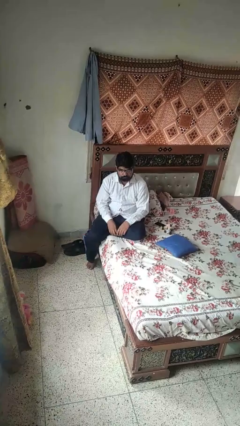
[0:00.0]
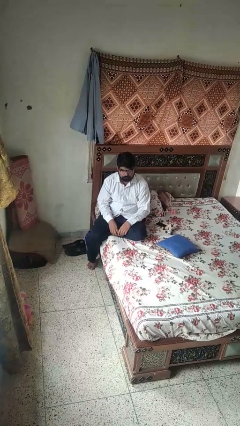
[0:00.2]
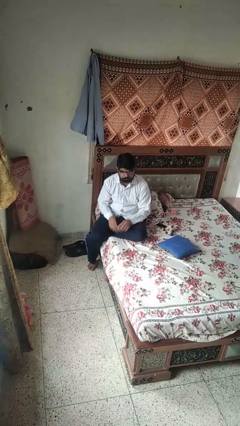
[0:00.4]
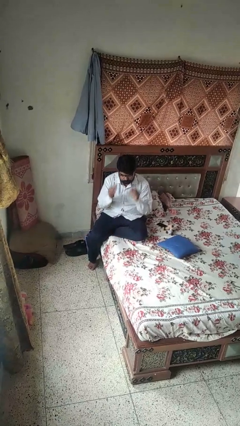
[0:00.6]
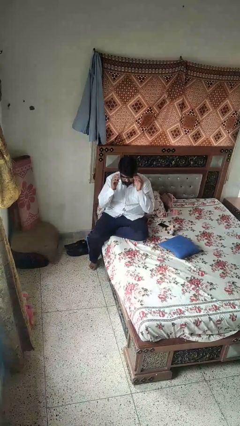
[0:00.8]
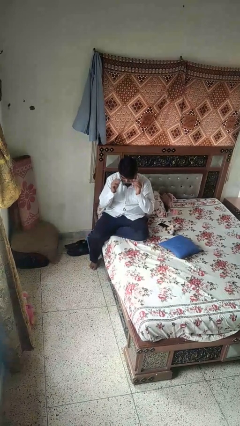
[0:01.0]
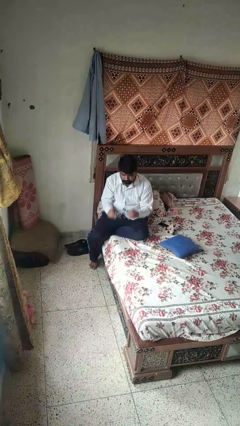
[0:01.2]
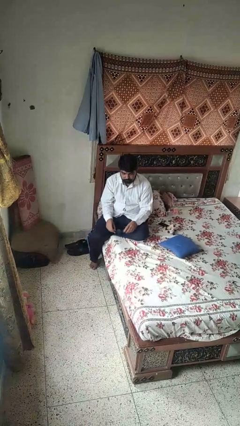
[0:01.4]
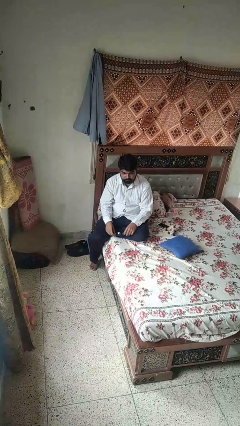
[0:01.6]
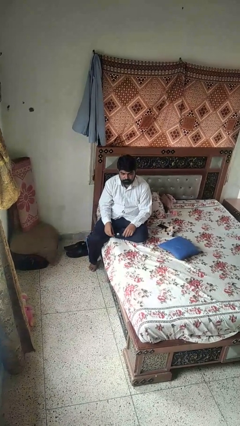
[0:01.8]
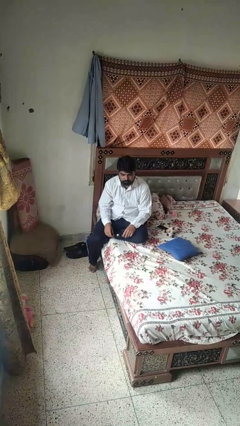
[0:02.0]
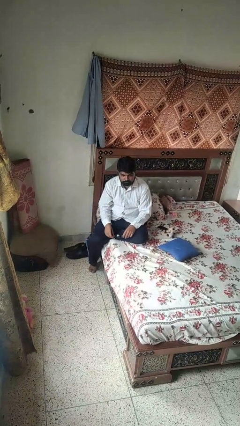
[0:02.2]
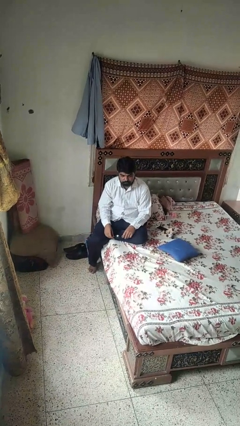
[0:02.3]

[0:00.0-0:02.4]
person takes off glasses

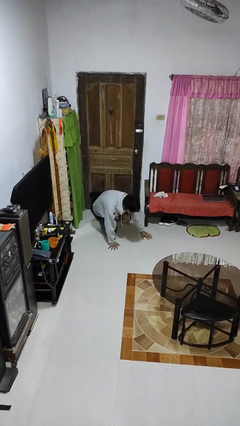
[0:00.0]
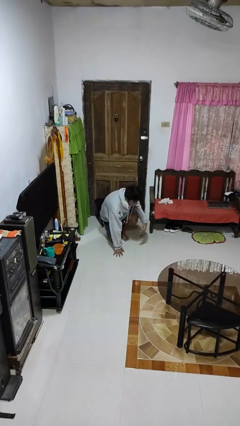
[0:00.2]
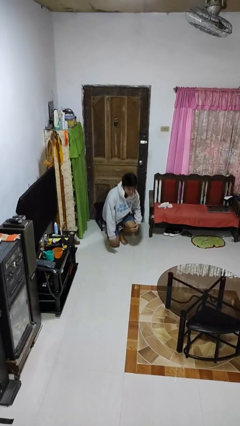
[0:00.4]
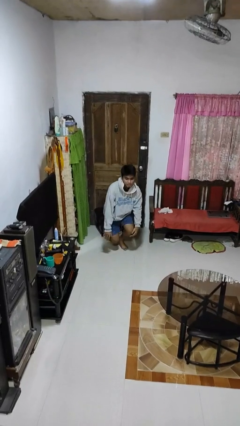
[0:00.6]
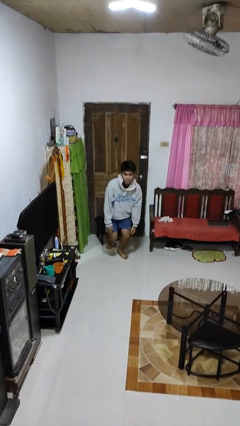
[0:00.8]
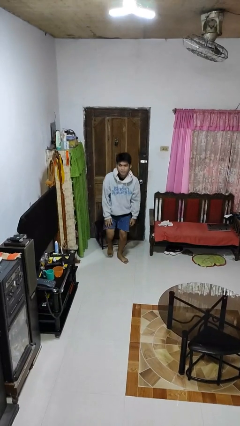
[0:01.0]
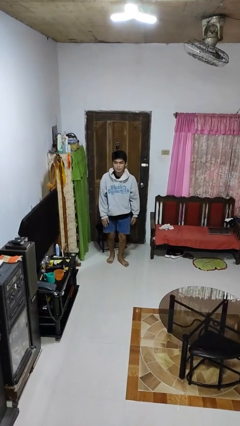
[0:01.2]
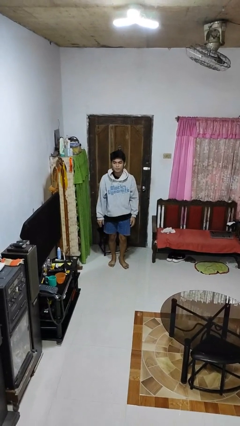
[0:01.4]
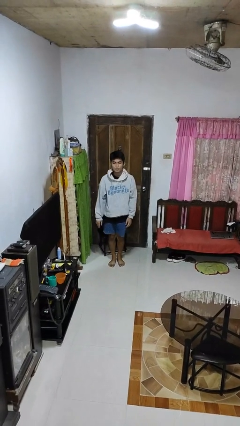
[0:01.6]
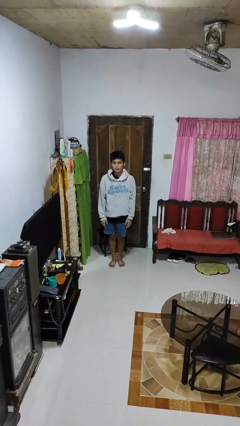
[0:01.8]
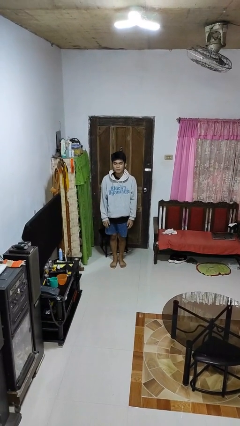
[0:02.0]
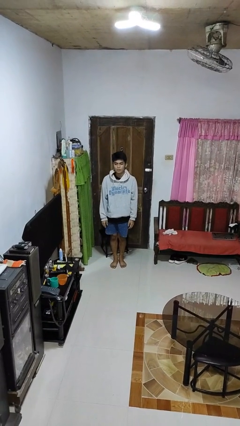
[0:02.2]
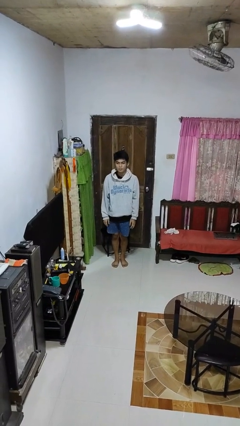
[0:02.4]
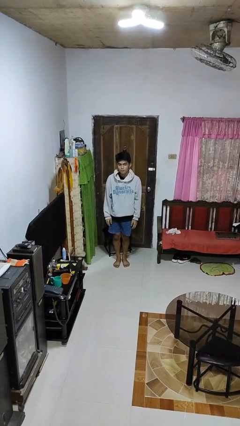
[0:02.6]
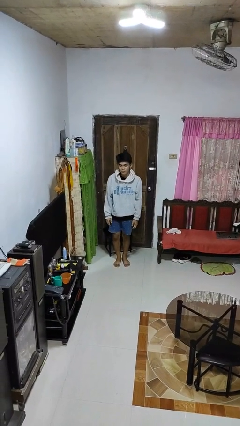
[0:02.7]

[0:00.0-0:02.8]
person stands up from floor

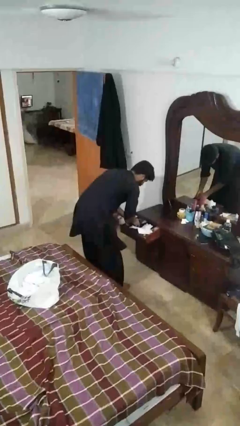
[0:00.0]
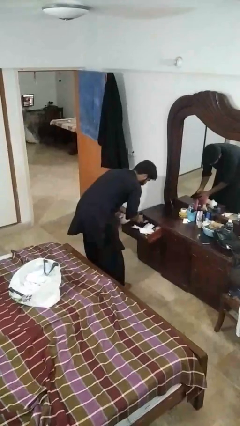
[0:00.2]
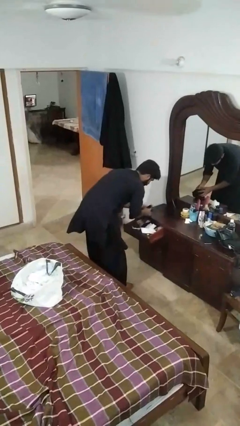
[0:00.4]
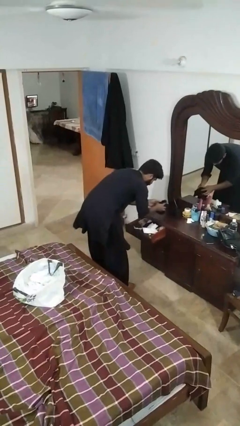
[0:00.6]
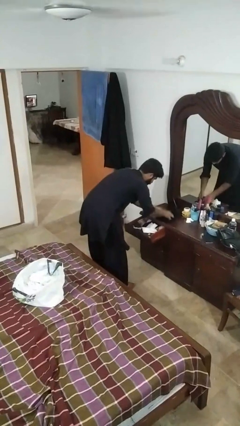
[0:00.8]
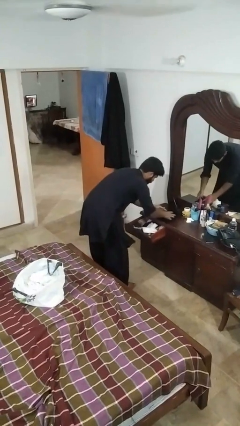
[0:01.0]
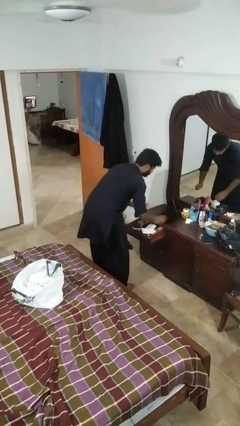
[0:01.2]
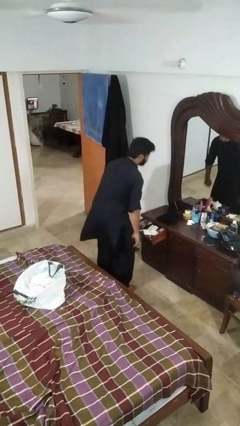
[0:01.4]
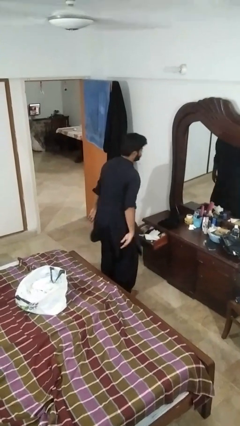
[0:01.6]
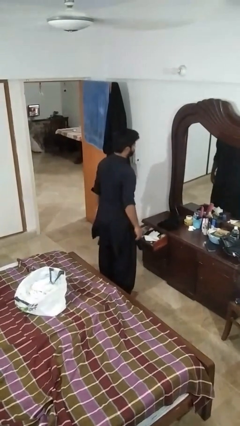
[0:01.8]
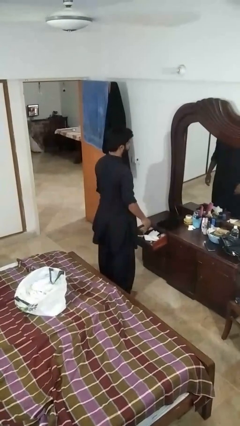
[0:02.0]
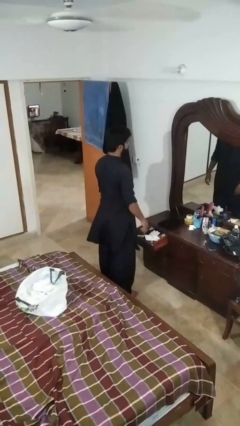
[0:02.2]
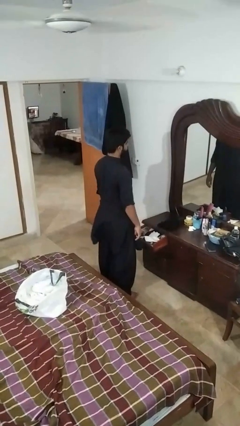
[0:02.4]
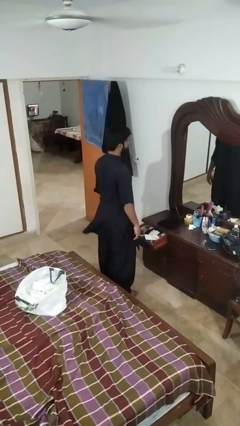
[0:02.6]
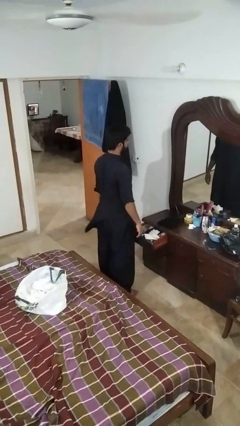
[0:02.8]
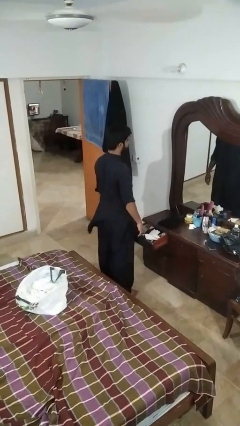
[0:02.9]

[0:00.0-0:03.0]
person takes clothes from dresser

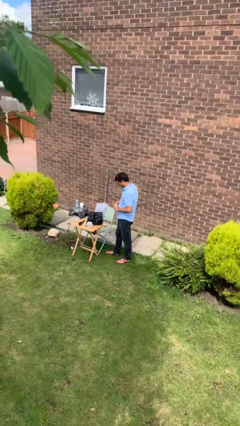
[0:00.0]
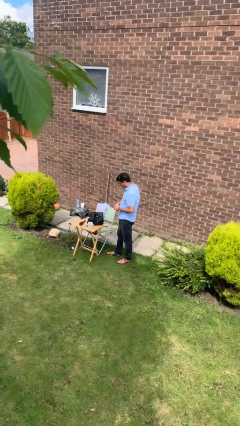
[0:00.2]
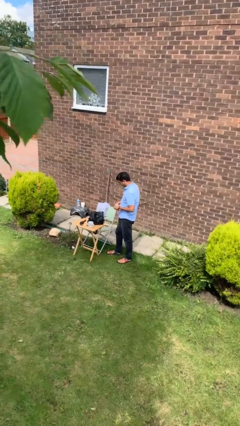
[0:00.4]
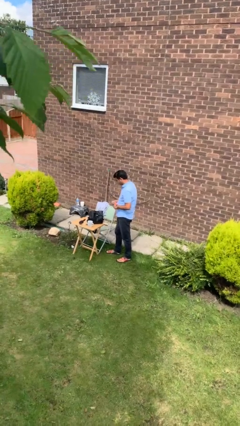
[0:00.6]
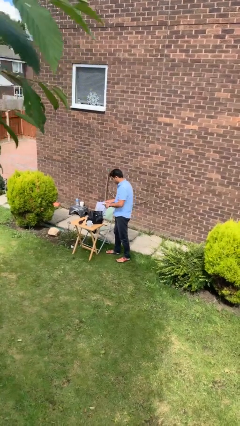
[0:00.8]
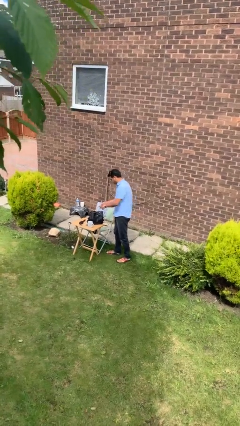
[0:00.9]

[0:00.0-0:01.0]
person puts object into backpack

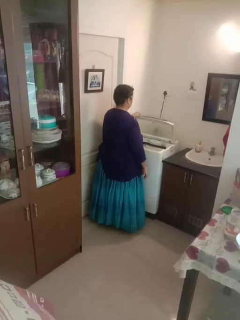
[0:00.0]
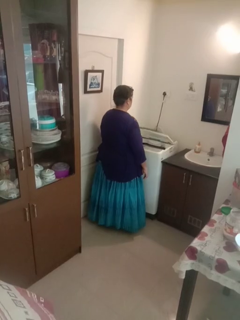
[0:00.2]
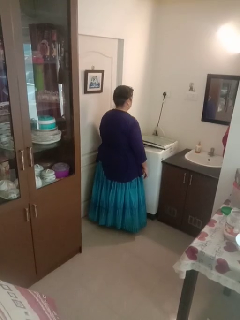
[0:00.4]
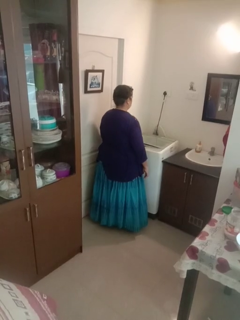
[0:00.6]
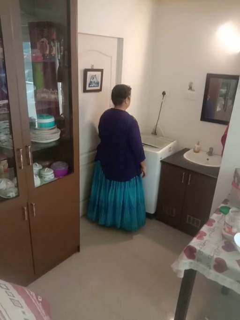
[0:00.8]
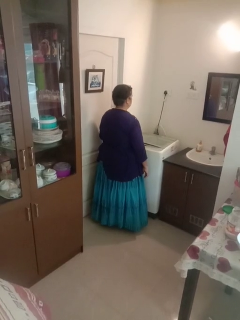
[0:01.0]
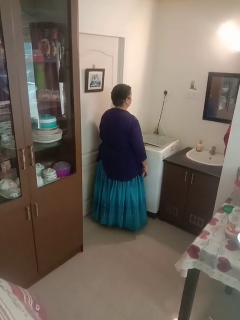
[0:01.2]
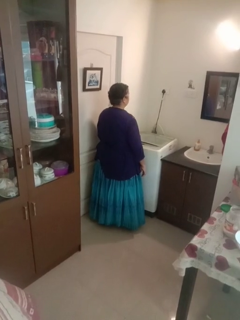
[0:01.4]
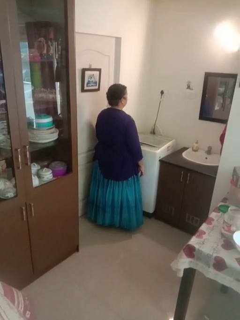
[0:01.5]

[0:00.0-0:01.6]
person closes clothes washer

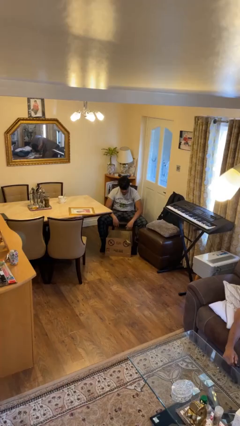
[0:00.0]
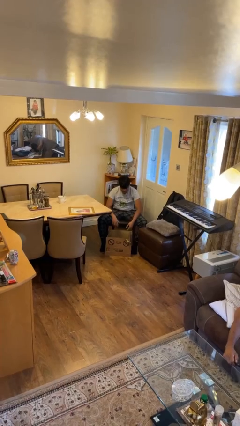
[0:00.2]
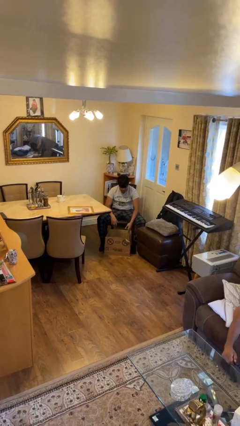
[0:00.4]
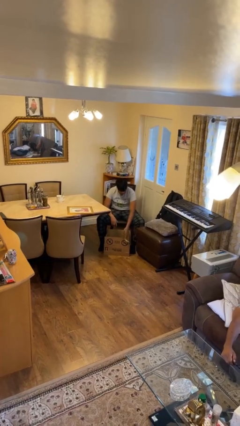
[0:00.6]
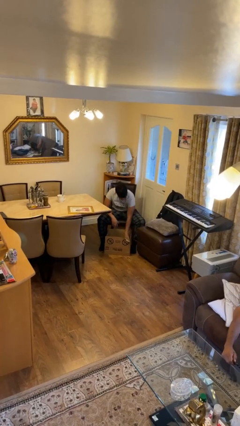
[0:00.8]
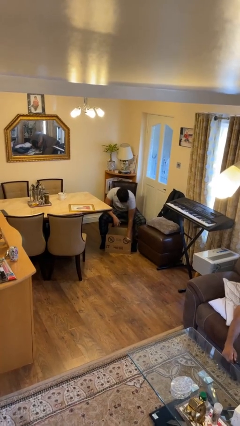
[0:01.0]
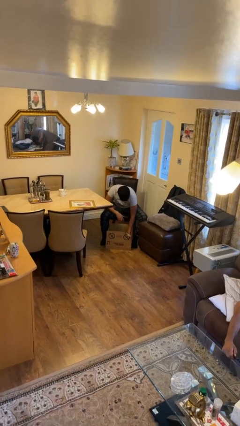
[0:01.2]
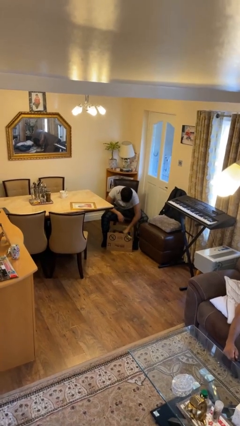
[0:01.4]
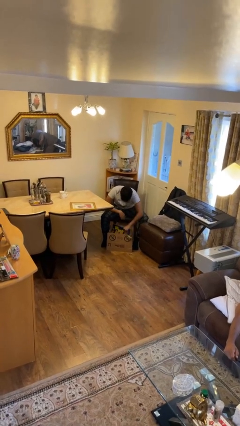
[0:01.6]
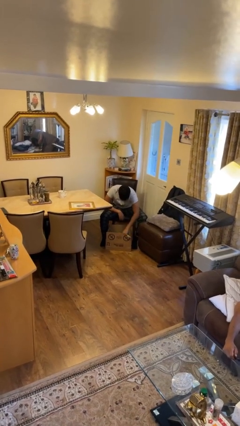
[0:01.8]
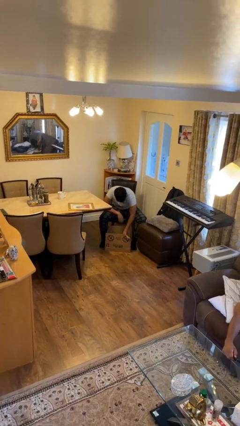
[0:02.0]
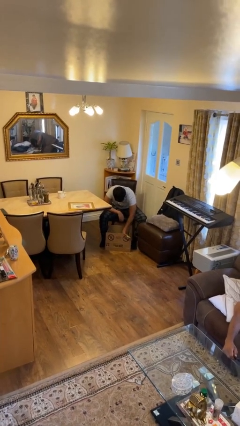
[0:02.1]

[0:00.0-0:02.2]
person searches in box

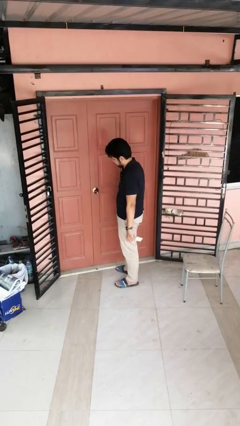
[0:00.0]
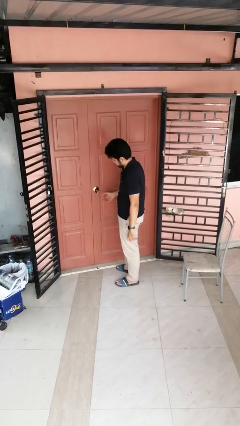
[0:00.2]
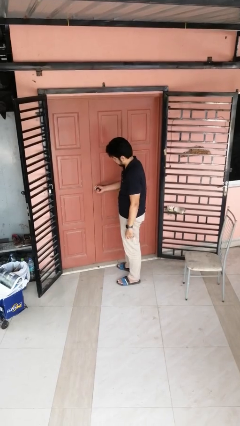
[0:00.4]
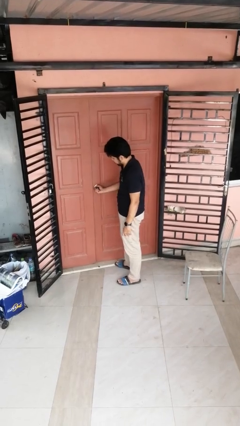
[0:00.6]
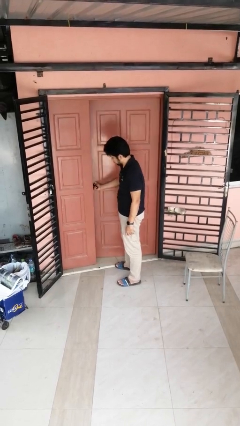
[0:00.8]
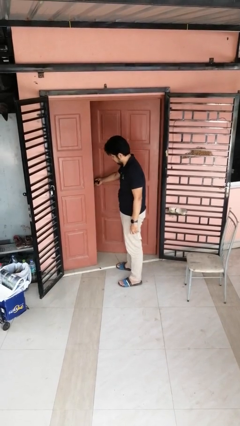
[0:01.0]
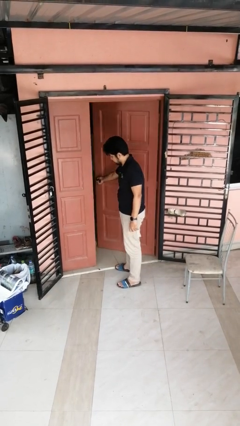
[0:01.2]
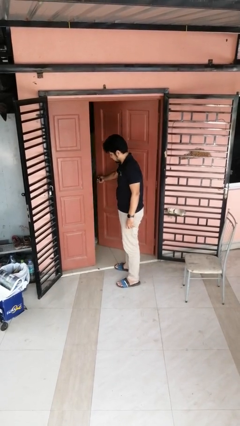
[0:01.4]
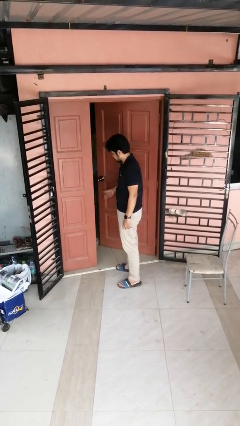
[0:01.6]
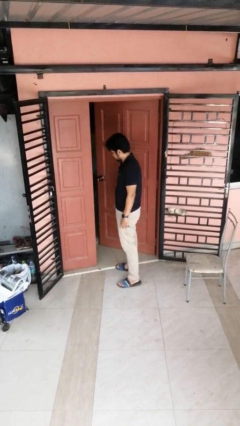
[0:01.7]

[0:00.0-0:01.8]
person opens facility door

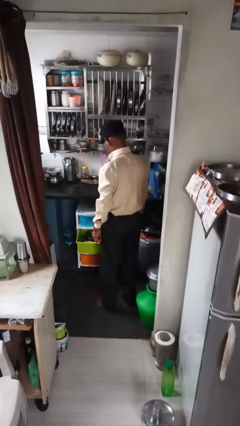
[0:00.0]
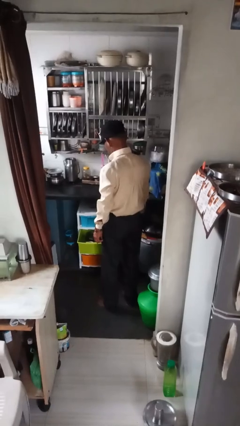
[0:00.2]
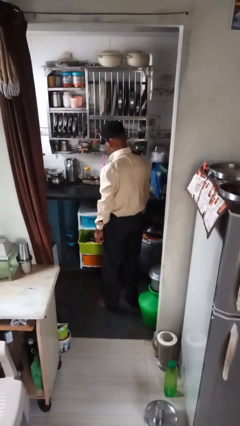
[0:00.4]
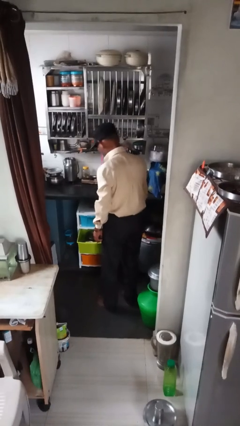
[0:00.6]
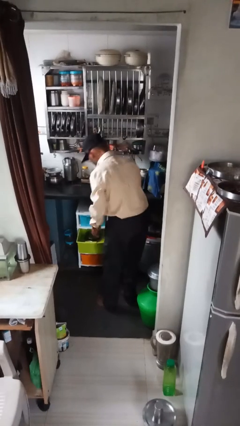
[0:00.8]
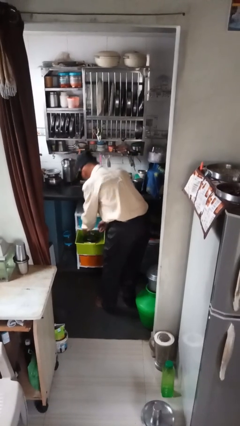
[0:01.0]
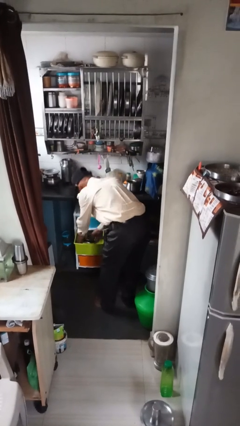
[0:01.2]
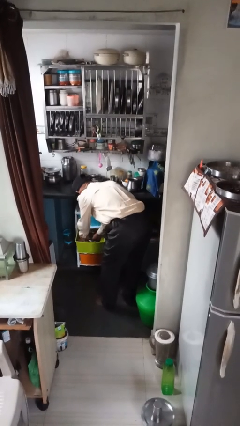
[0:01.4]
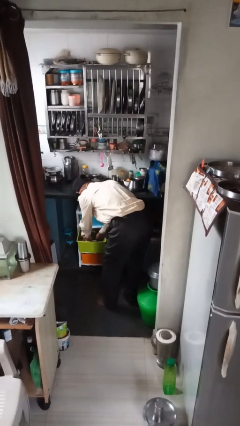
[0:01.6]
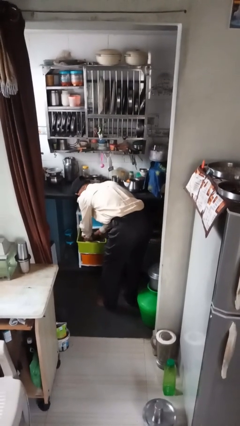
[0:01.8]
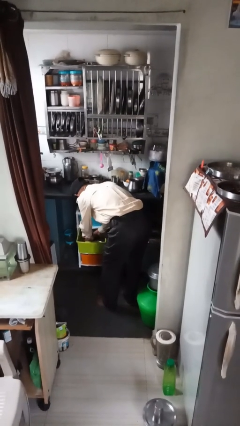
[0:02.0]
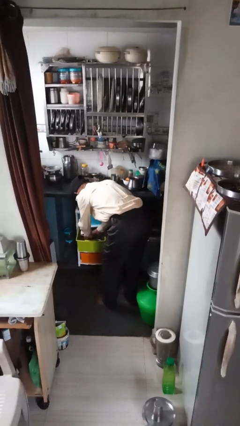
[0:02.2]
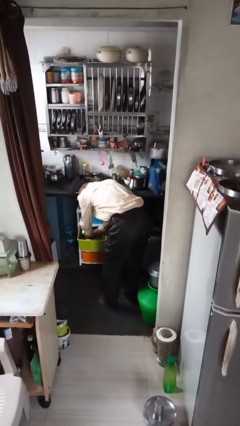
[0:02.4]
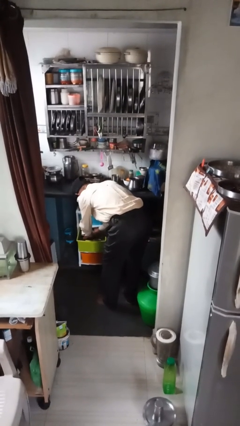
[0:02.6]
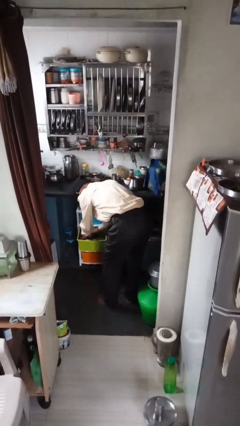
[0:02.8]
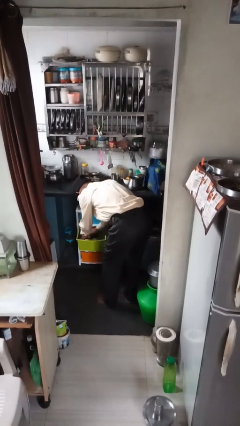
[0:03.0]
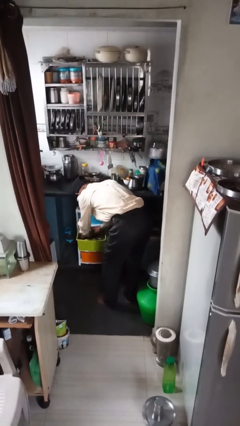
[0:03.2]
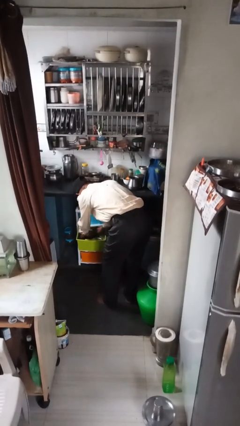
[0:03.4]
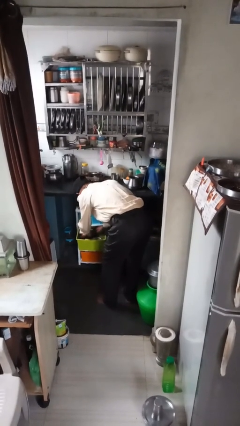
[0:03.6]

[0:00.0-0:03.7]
person searches in kitchen drawer
